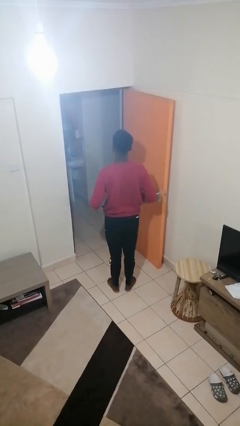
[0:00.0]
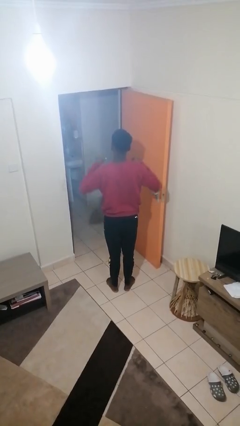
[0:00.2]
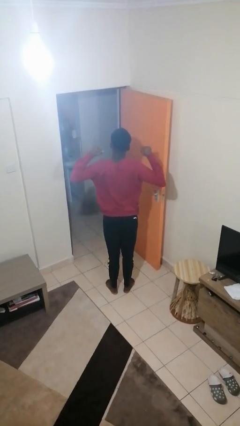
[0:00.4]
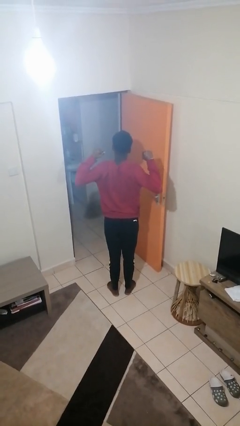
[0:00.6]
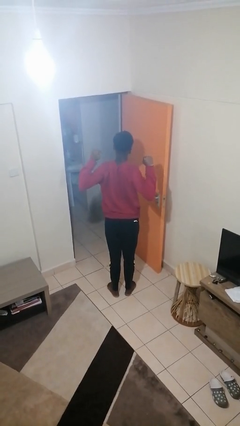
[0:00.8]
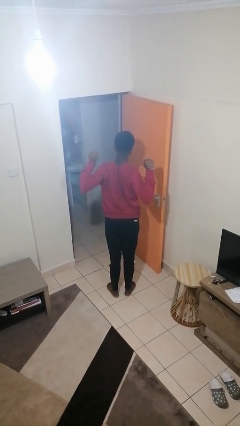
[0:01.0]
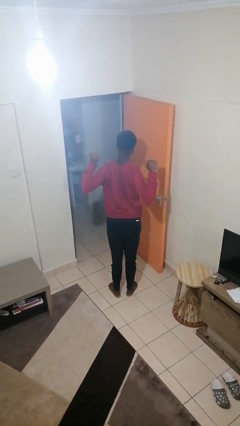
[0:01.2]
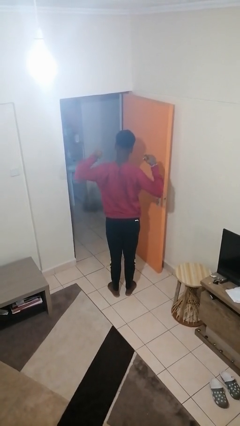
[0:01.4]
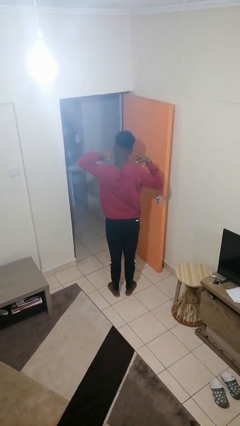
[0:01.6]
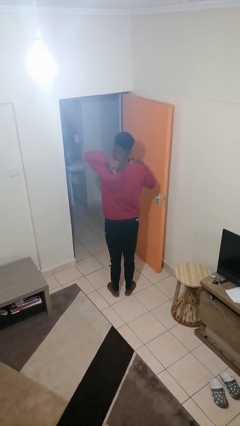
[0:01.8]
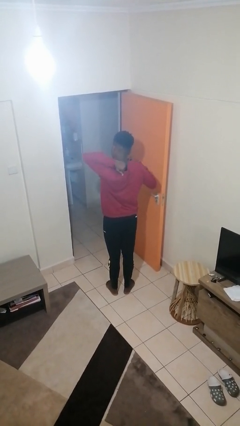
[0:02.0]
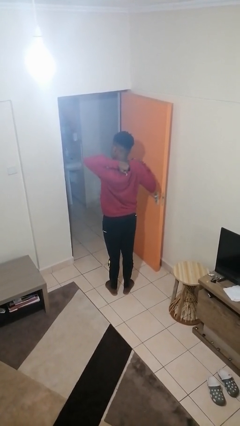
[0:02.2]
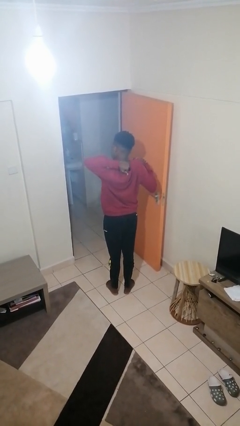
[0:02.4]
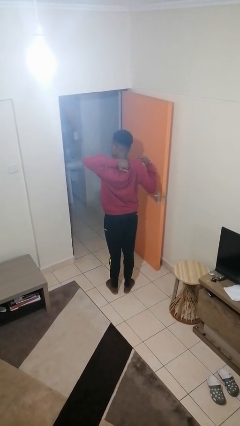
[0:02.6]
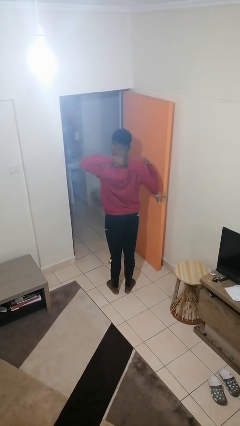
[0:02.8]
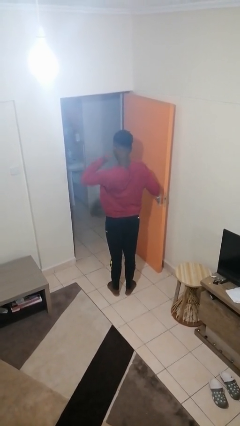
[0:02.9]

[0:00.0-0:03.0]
person stretches arms to side

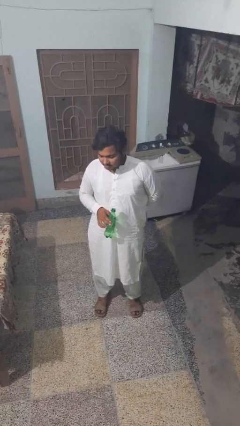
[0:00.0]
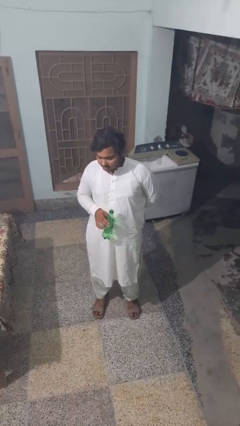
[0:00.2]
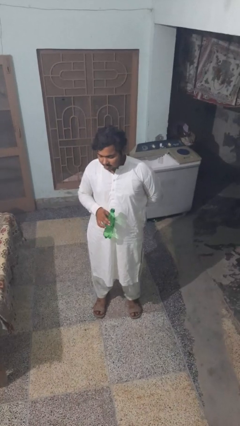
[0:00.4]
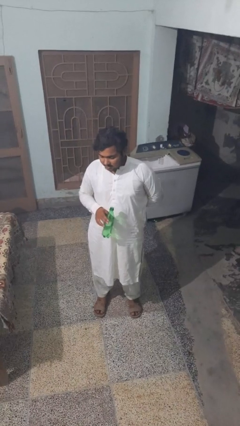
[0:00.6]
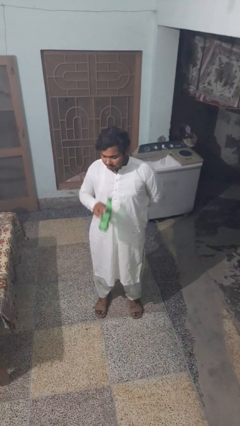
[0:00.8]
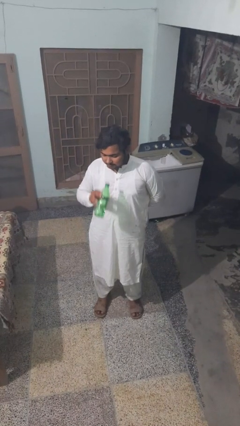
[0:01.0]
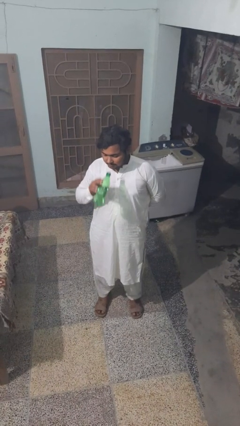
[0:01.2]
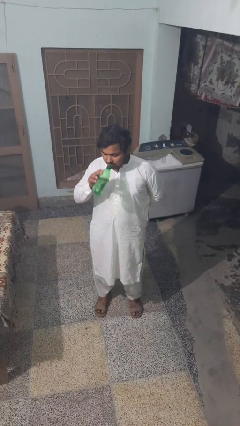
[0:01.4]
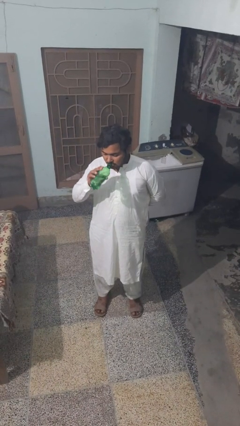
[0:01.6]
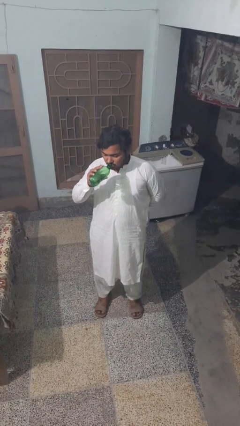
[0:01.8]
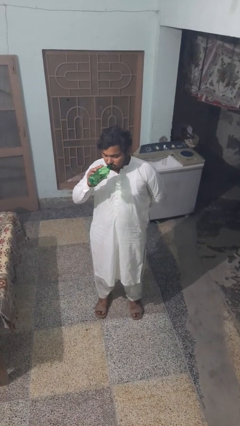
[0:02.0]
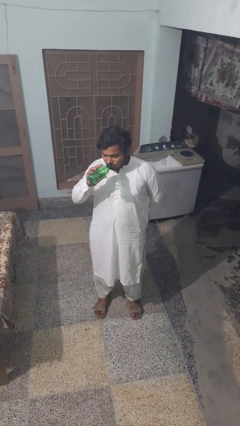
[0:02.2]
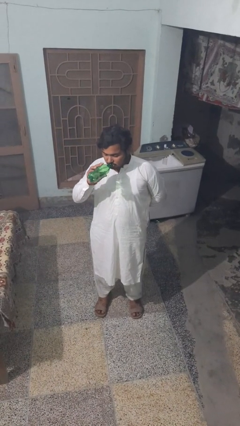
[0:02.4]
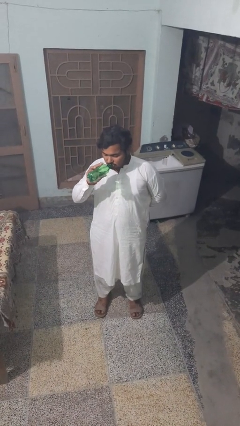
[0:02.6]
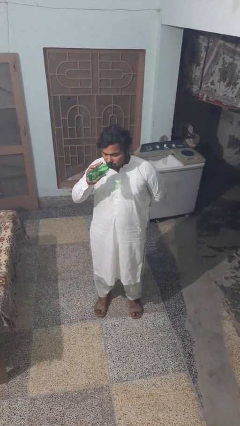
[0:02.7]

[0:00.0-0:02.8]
person drinks from bottle

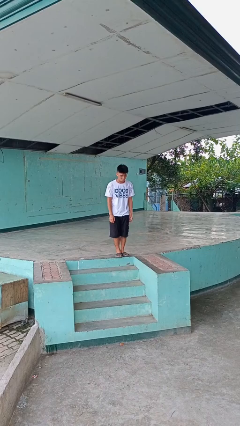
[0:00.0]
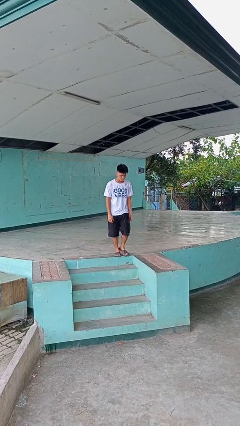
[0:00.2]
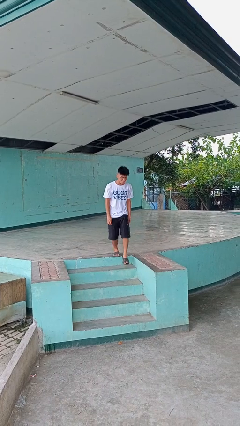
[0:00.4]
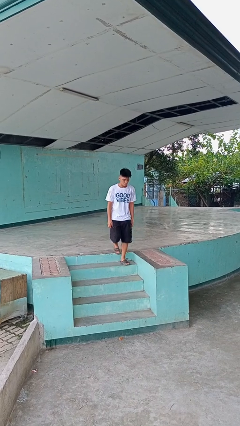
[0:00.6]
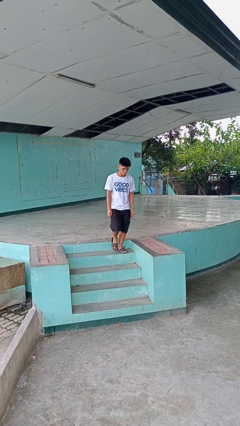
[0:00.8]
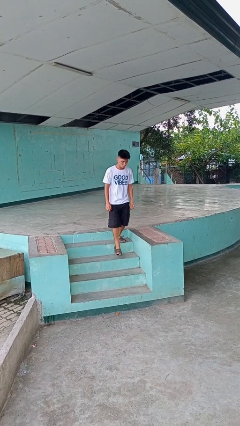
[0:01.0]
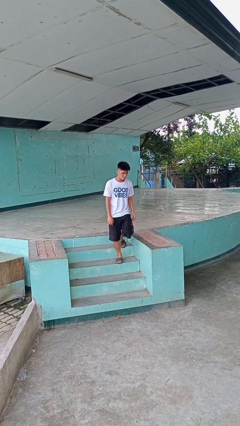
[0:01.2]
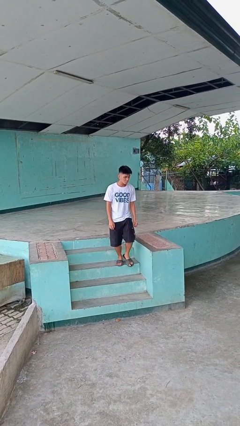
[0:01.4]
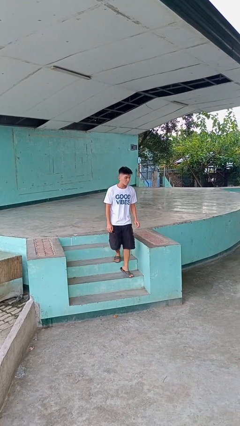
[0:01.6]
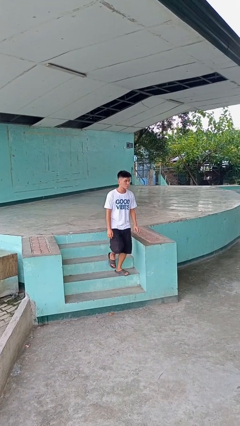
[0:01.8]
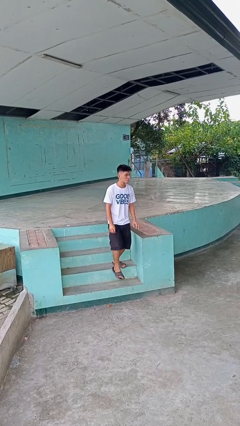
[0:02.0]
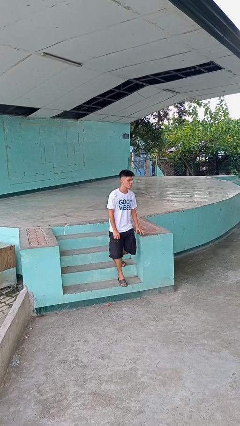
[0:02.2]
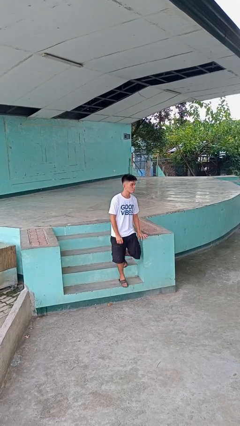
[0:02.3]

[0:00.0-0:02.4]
person climbs down stairs

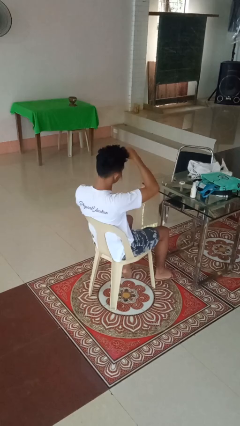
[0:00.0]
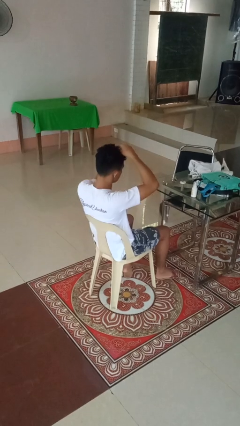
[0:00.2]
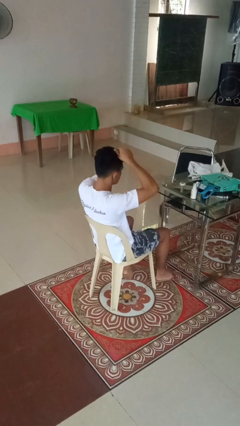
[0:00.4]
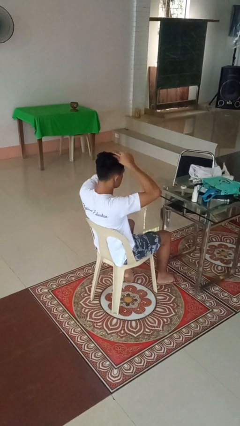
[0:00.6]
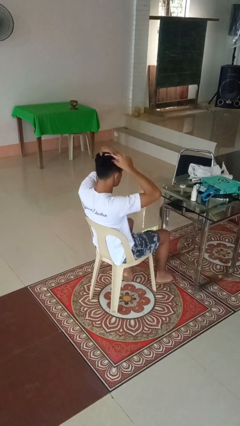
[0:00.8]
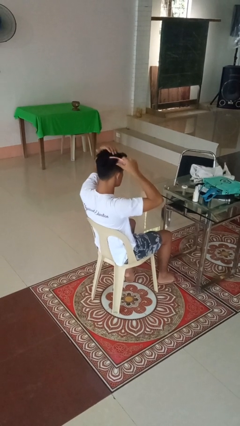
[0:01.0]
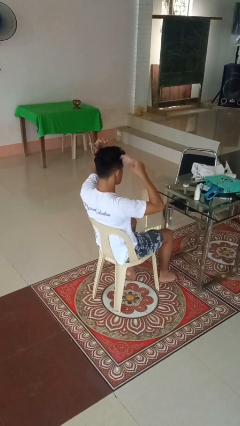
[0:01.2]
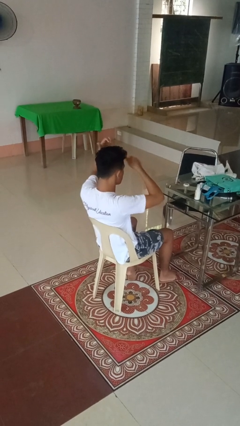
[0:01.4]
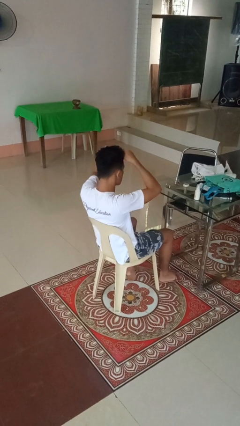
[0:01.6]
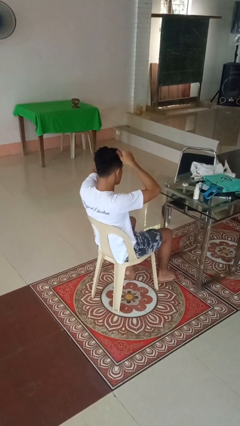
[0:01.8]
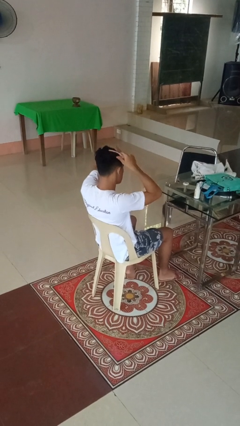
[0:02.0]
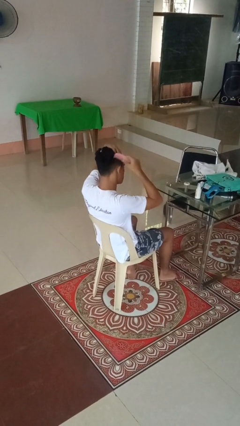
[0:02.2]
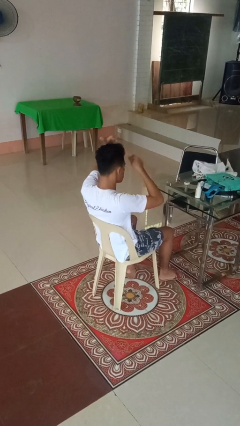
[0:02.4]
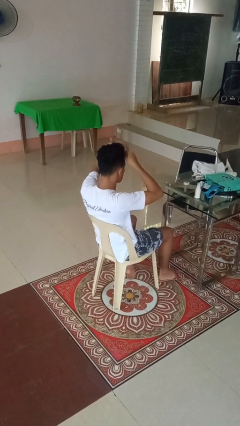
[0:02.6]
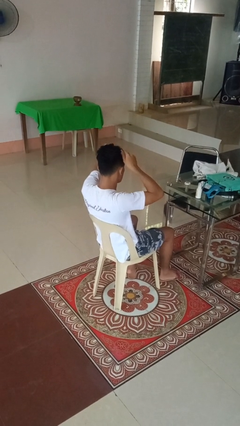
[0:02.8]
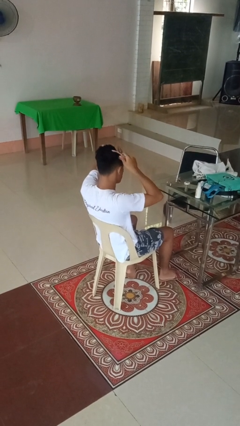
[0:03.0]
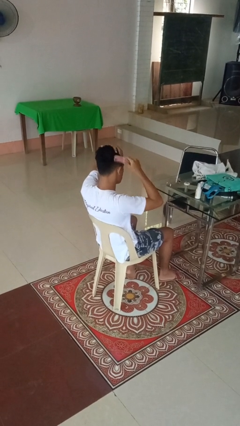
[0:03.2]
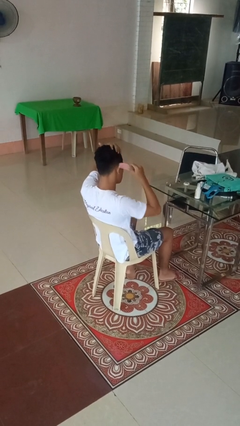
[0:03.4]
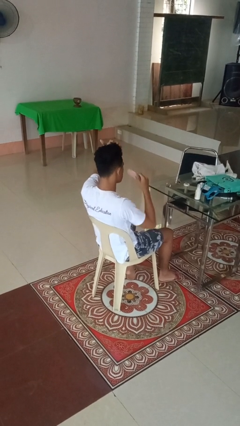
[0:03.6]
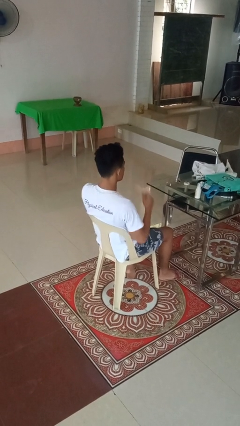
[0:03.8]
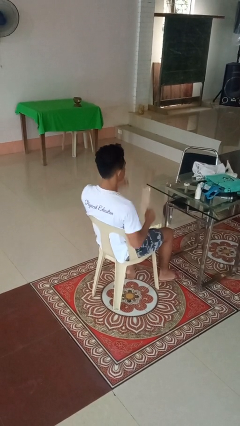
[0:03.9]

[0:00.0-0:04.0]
person brushes hair

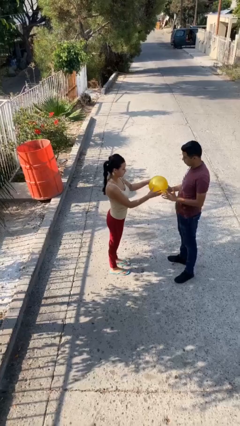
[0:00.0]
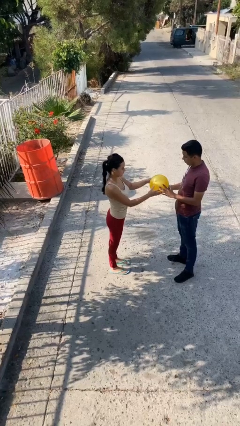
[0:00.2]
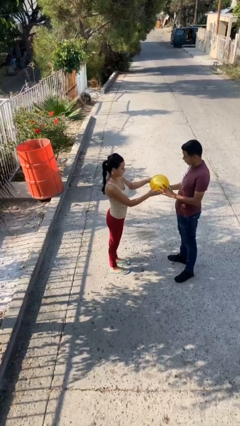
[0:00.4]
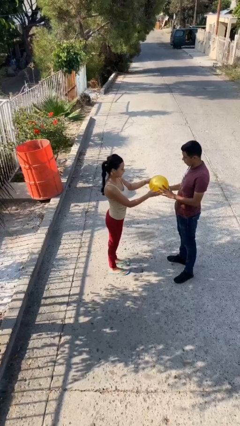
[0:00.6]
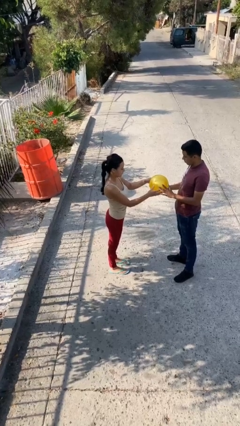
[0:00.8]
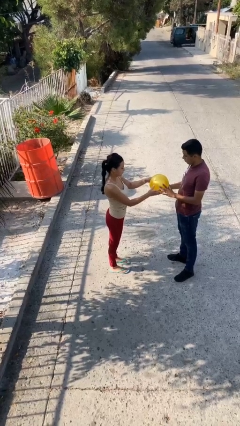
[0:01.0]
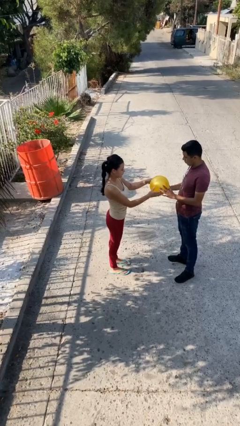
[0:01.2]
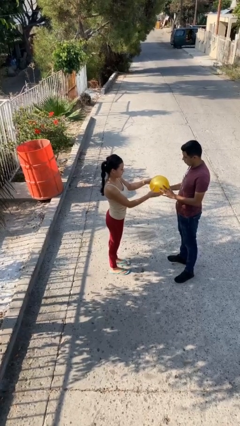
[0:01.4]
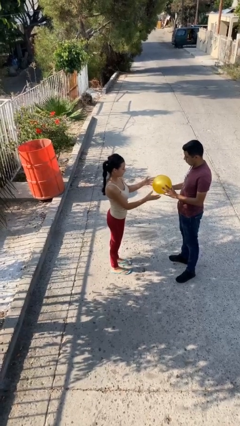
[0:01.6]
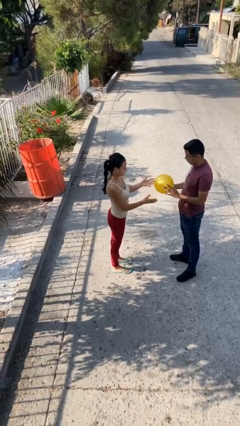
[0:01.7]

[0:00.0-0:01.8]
person transfers object to person

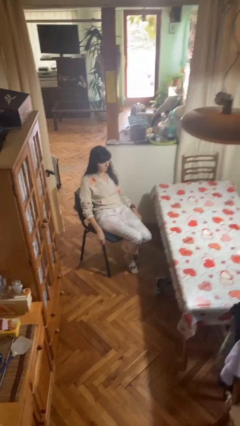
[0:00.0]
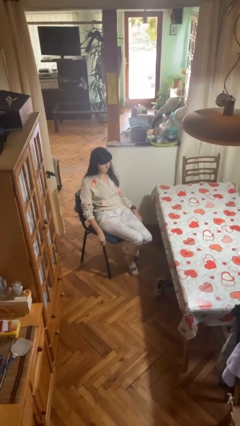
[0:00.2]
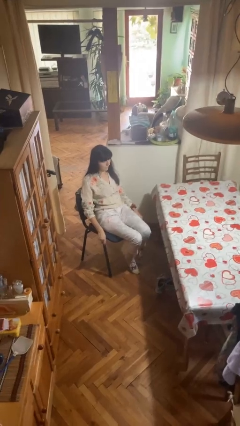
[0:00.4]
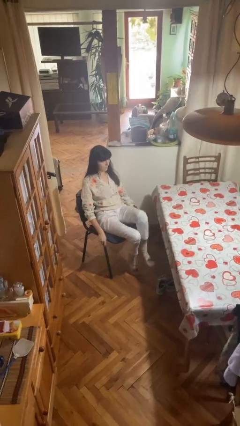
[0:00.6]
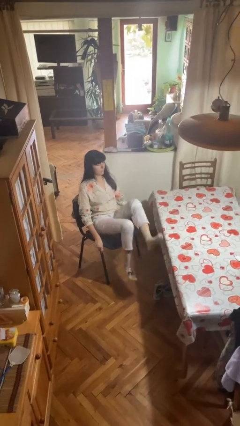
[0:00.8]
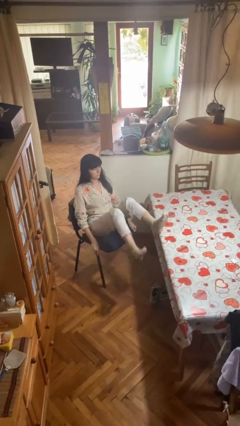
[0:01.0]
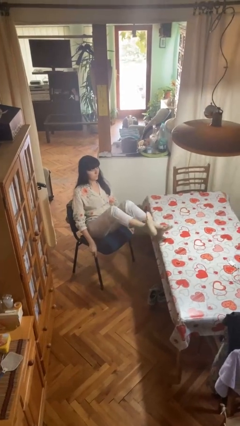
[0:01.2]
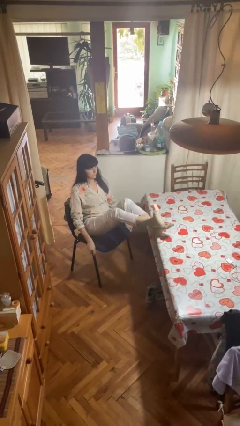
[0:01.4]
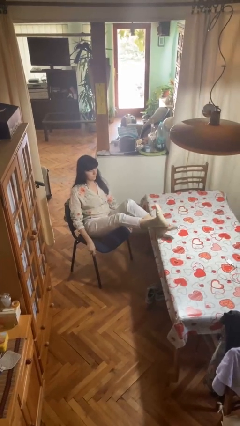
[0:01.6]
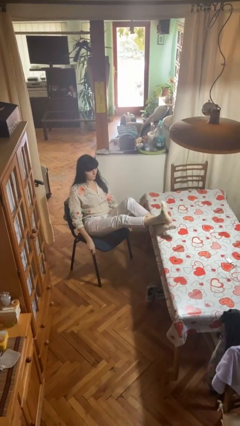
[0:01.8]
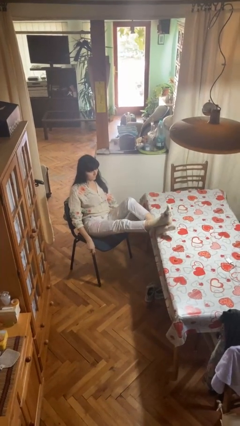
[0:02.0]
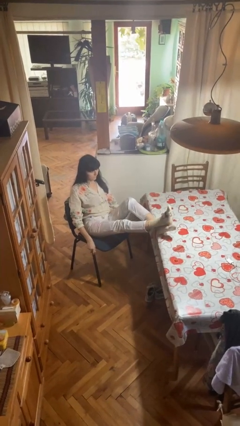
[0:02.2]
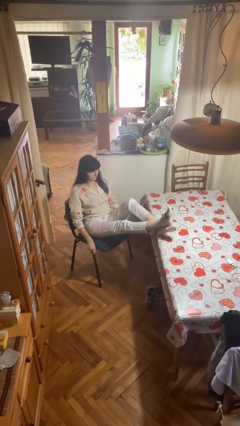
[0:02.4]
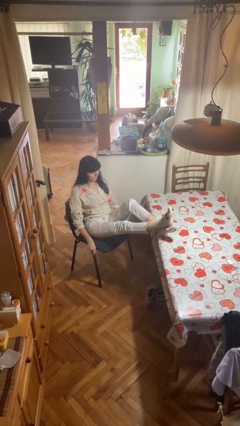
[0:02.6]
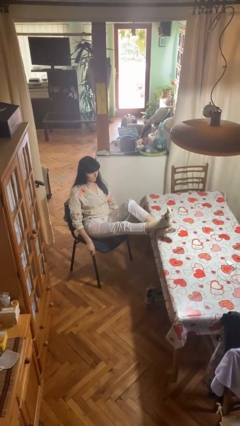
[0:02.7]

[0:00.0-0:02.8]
person puts feet up

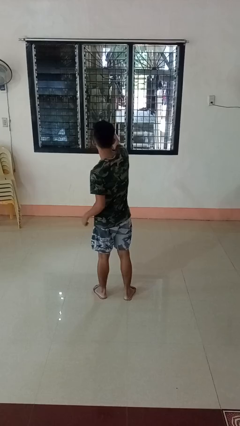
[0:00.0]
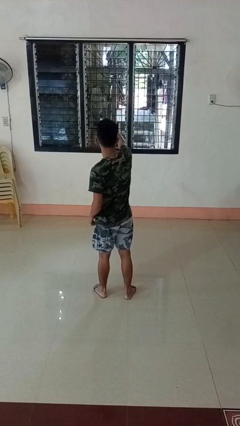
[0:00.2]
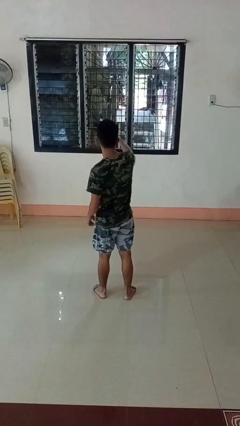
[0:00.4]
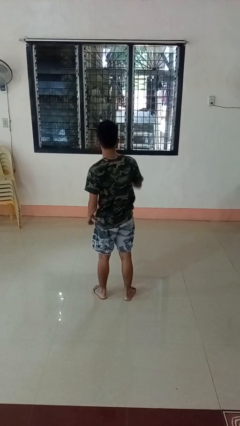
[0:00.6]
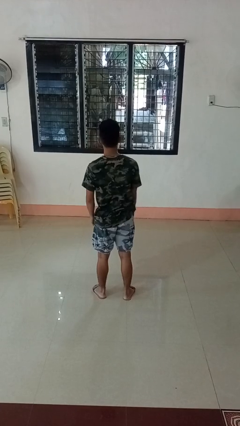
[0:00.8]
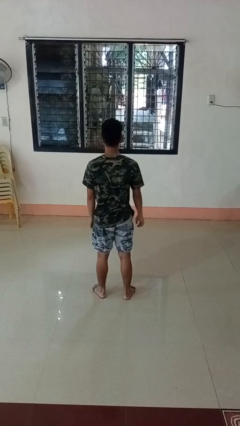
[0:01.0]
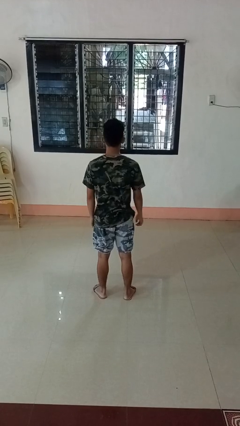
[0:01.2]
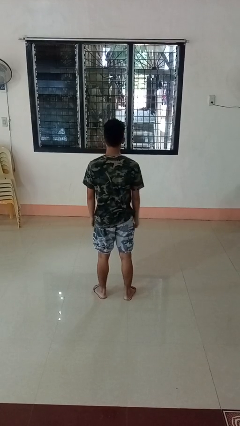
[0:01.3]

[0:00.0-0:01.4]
person punches
